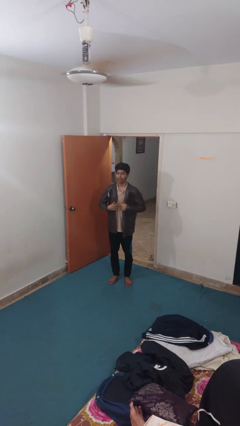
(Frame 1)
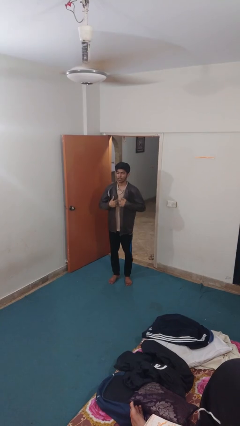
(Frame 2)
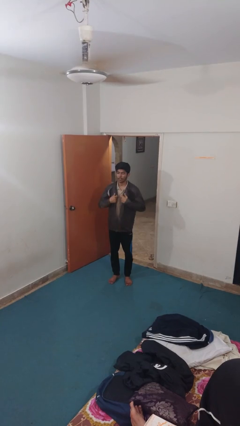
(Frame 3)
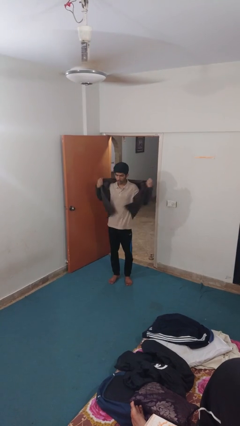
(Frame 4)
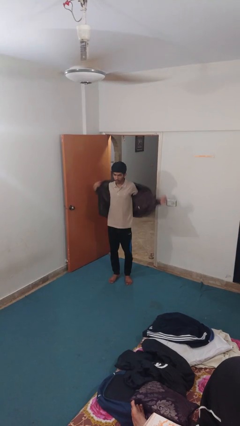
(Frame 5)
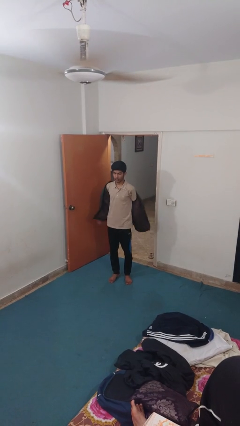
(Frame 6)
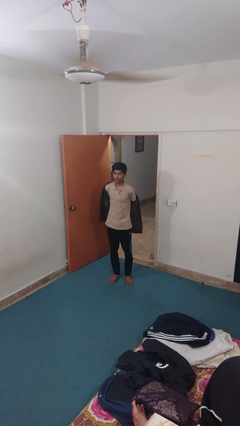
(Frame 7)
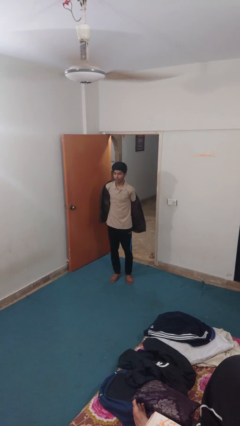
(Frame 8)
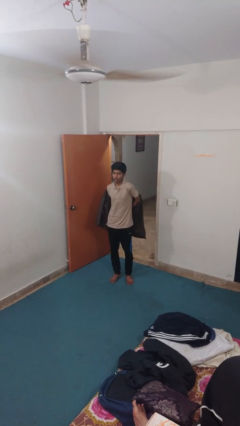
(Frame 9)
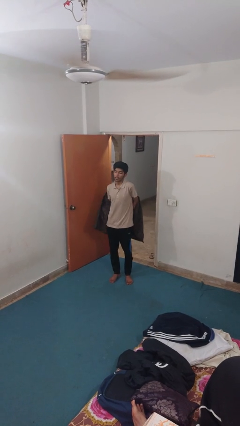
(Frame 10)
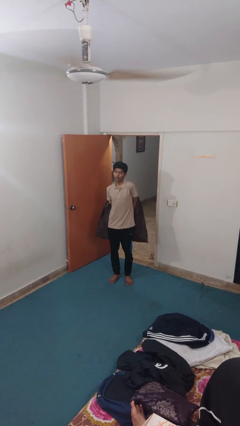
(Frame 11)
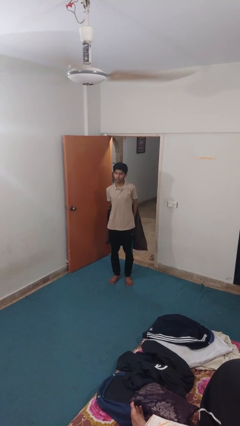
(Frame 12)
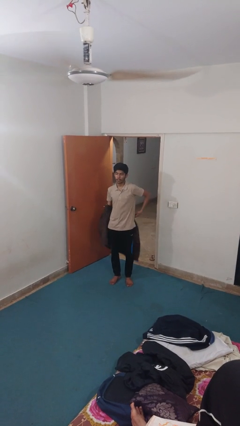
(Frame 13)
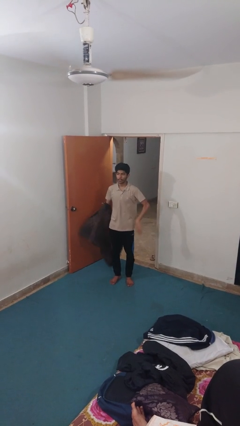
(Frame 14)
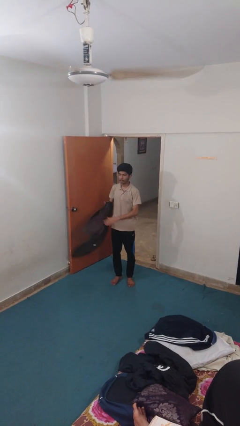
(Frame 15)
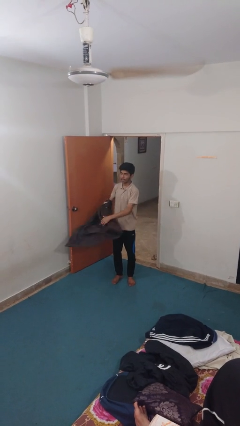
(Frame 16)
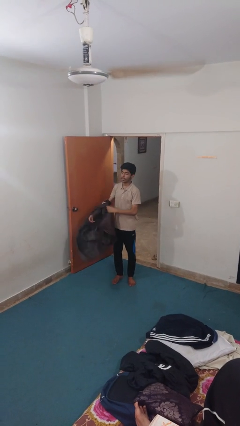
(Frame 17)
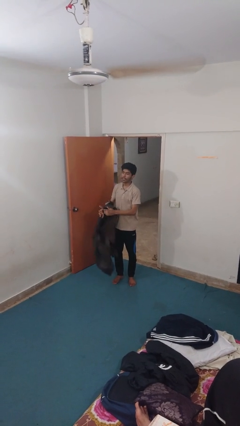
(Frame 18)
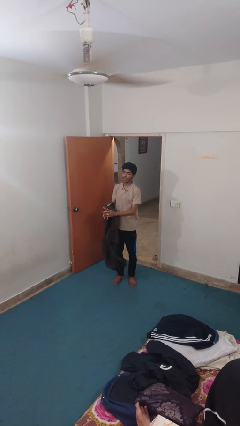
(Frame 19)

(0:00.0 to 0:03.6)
person takes off jacket

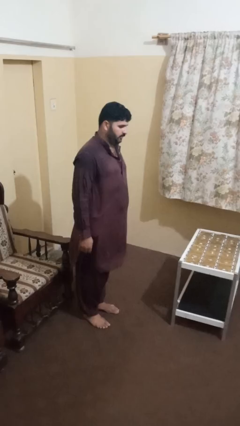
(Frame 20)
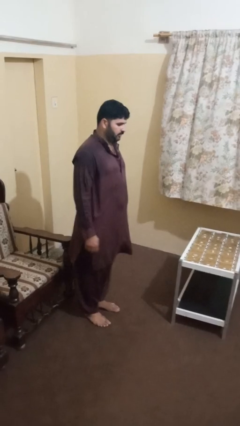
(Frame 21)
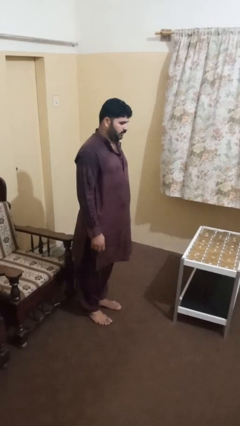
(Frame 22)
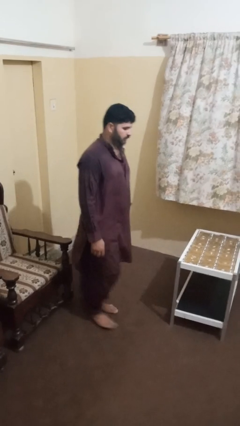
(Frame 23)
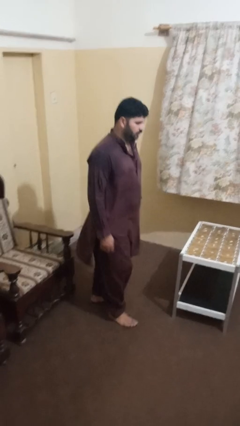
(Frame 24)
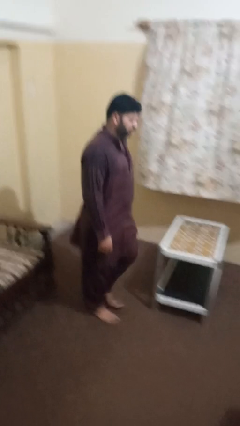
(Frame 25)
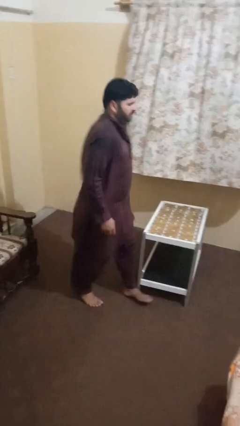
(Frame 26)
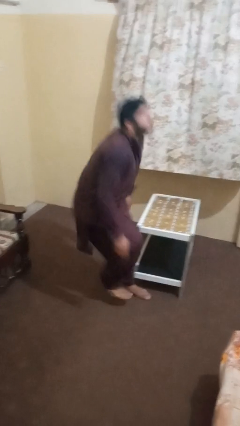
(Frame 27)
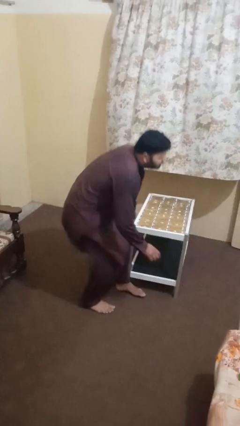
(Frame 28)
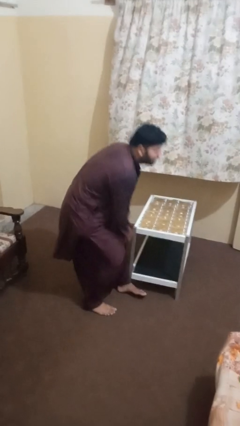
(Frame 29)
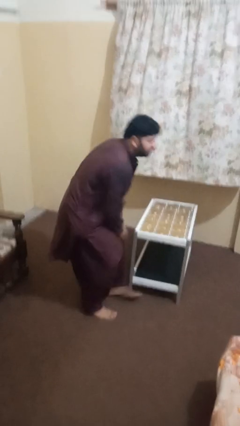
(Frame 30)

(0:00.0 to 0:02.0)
person bumps into table

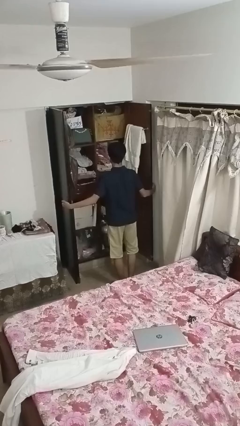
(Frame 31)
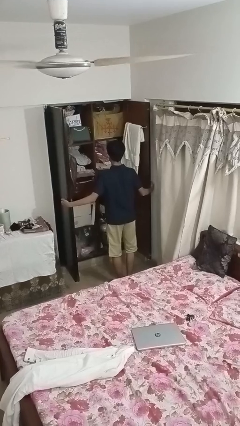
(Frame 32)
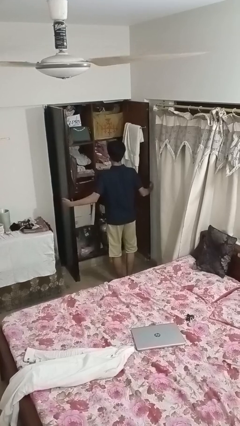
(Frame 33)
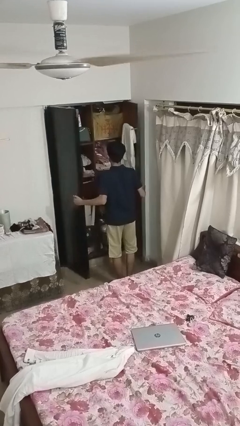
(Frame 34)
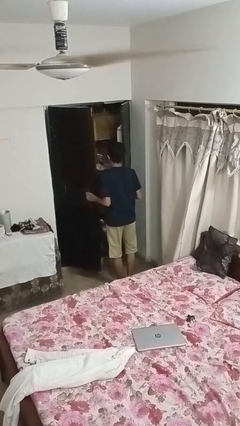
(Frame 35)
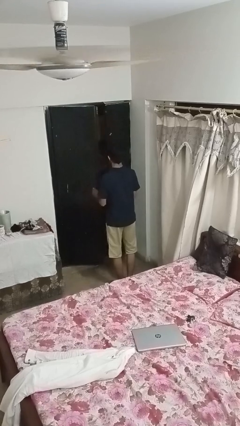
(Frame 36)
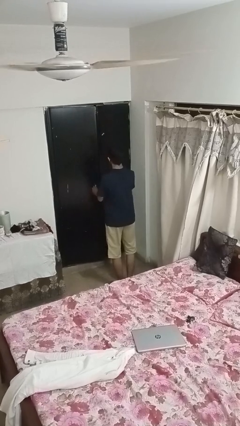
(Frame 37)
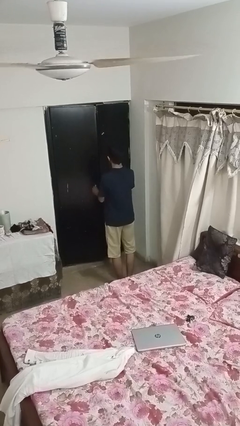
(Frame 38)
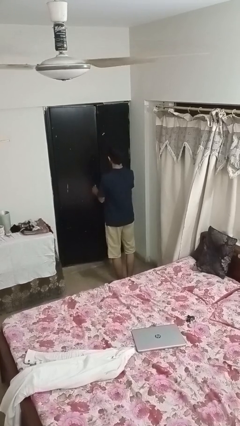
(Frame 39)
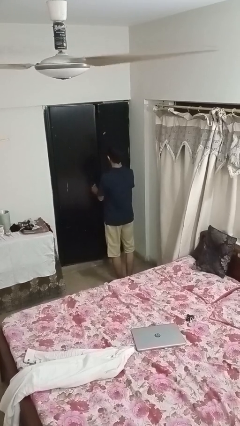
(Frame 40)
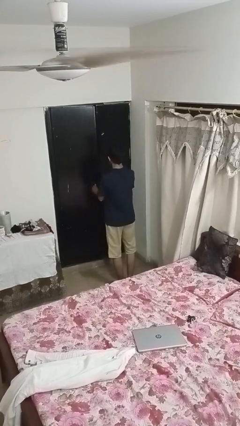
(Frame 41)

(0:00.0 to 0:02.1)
person closes closet door

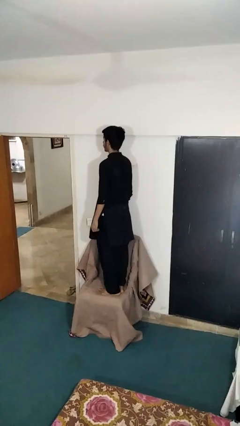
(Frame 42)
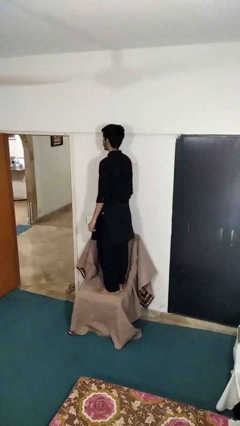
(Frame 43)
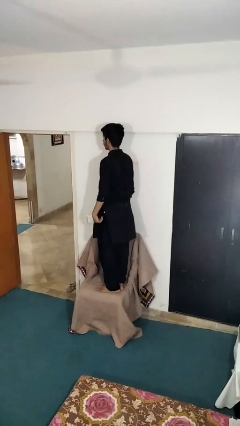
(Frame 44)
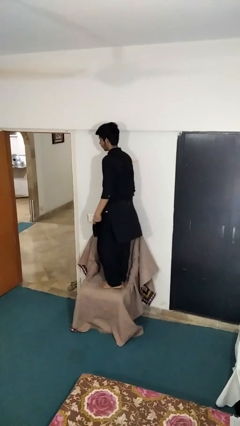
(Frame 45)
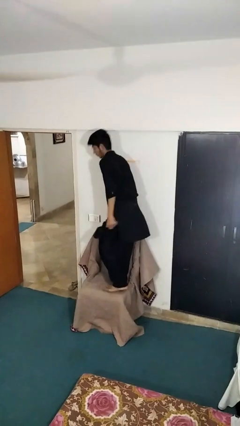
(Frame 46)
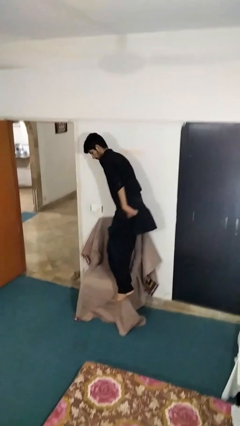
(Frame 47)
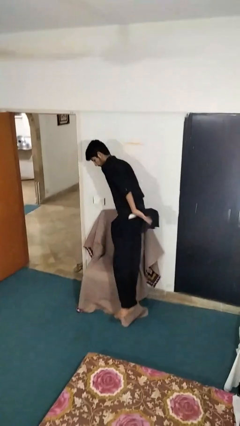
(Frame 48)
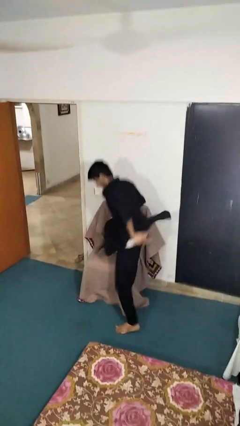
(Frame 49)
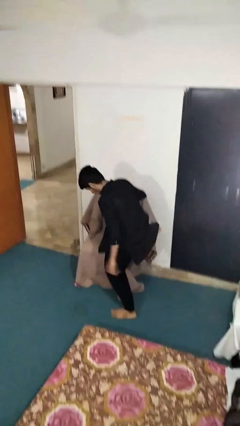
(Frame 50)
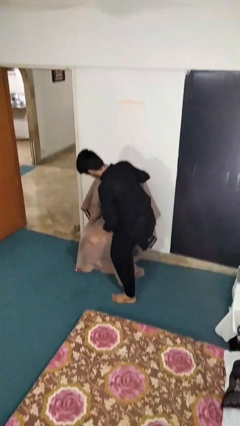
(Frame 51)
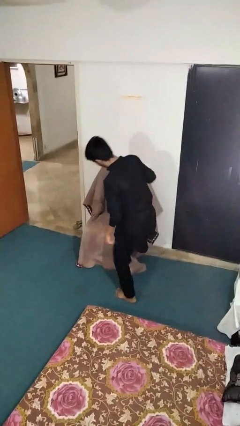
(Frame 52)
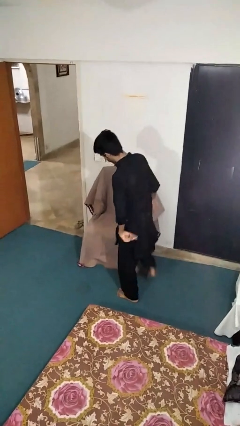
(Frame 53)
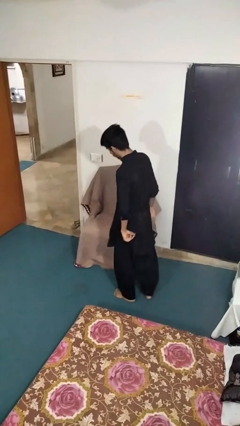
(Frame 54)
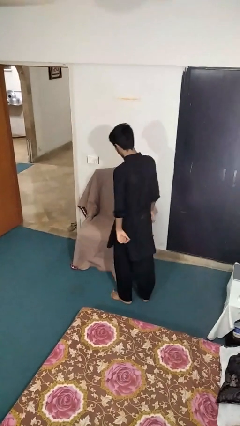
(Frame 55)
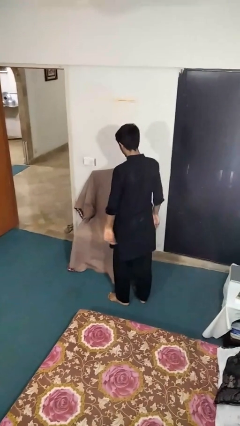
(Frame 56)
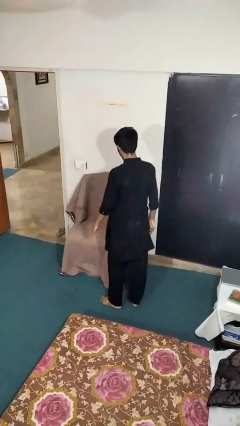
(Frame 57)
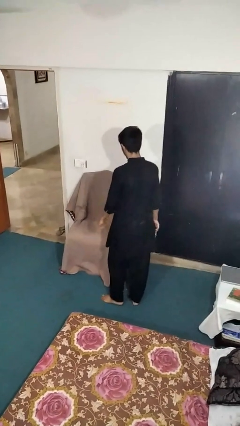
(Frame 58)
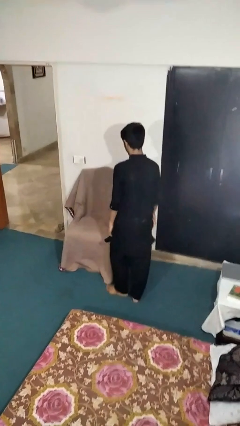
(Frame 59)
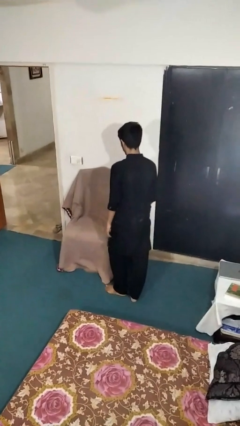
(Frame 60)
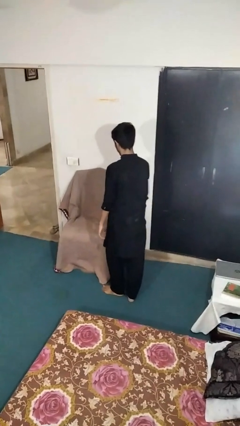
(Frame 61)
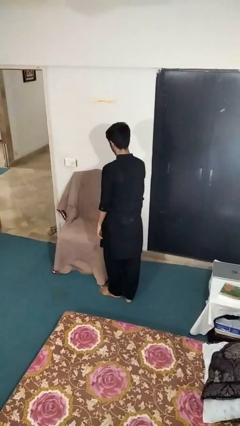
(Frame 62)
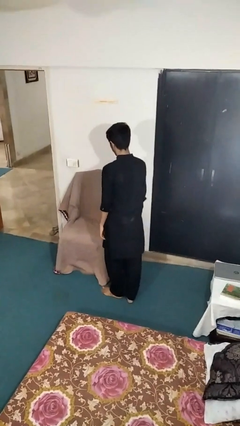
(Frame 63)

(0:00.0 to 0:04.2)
person climbs off couch

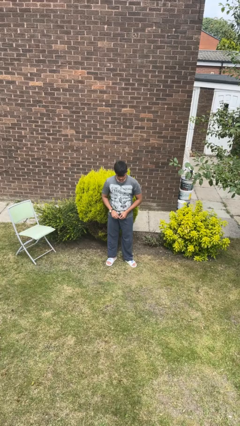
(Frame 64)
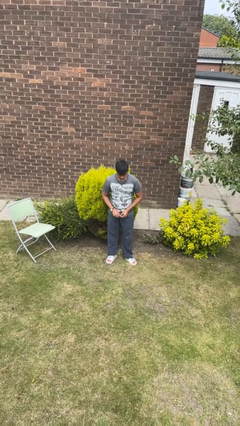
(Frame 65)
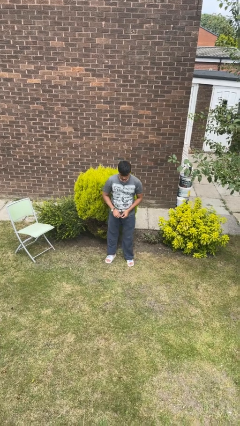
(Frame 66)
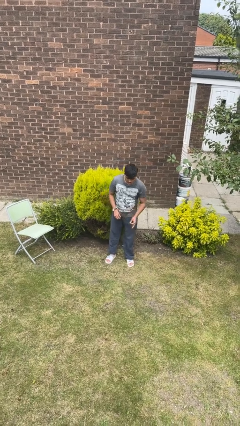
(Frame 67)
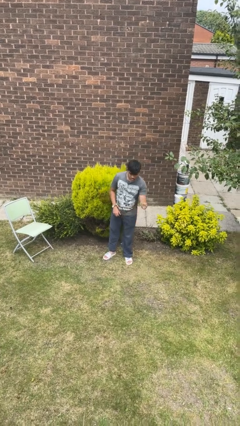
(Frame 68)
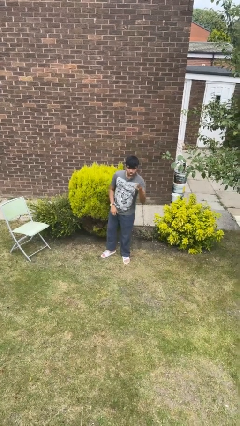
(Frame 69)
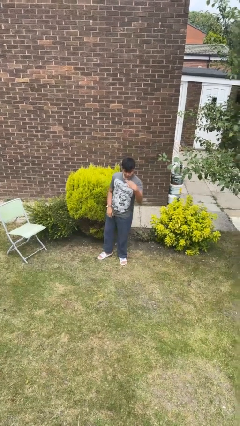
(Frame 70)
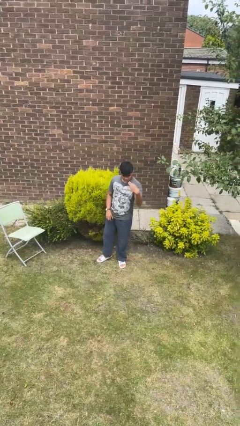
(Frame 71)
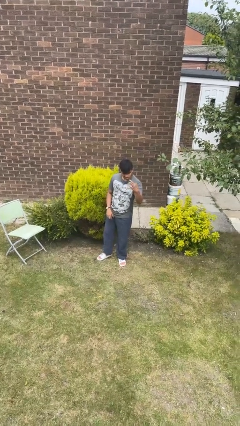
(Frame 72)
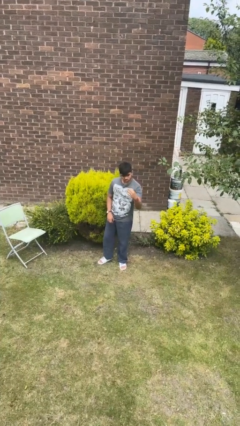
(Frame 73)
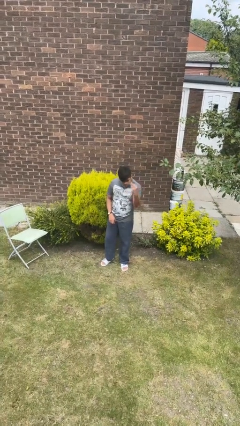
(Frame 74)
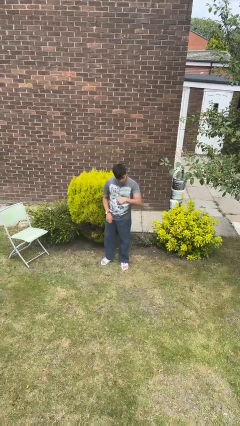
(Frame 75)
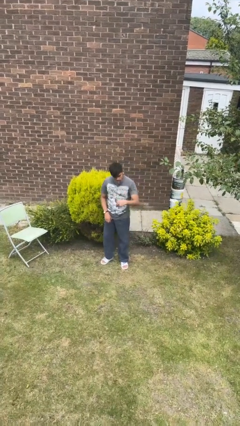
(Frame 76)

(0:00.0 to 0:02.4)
person gestures come here

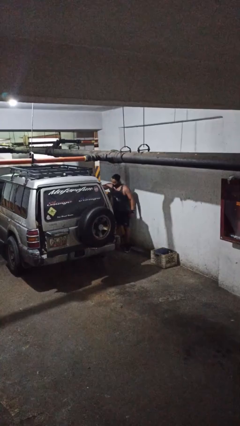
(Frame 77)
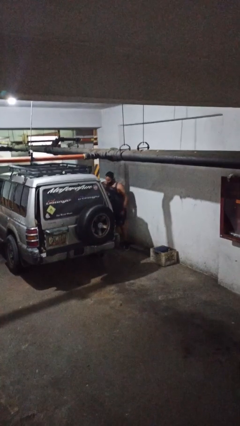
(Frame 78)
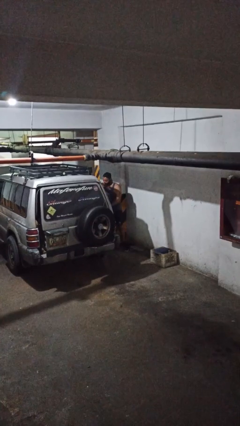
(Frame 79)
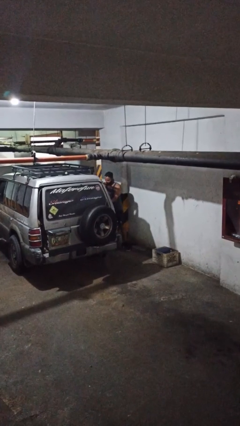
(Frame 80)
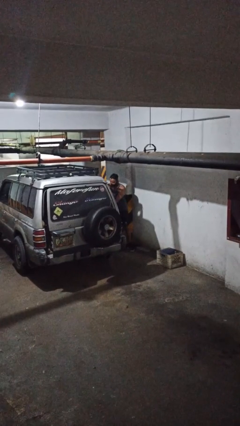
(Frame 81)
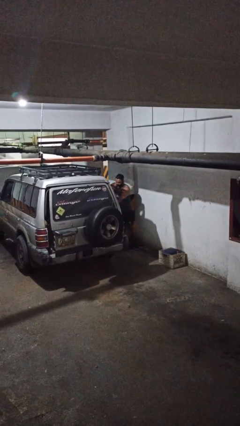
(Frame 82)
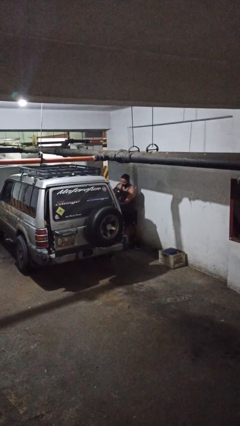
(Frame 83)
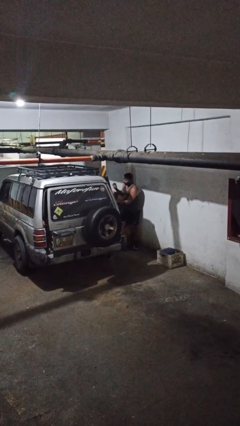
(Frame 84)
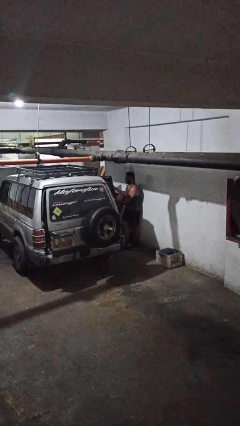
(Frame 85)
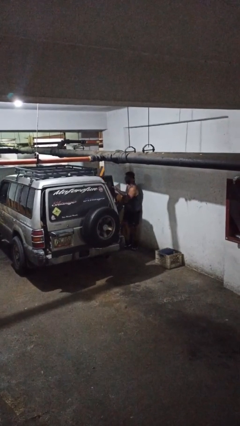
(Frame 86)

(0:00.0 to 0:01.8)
person opens car door

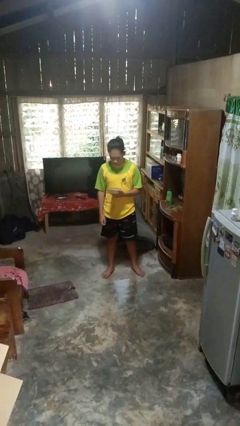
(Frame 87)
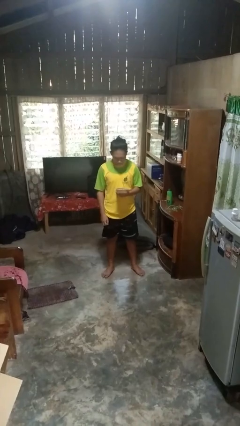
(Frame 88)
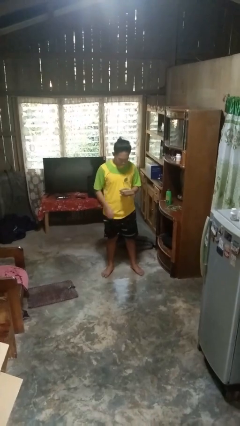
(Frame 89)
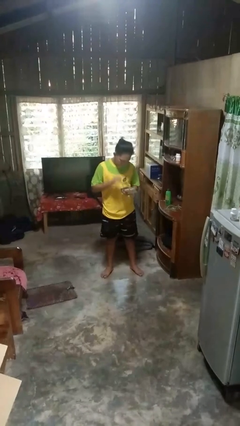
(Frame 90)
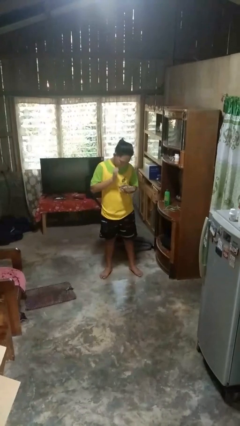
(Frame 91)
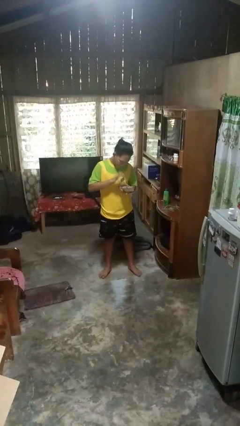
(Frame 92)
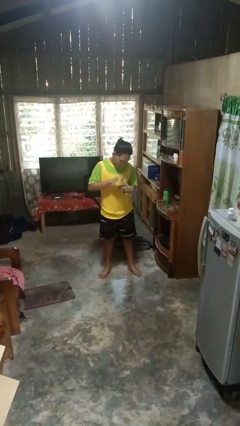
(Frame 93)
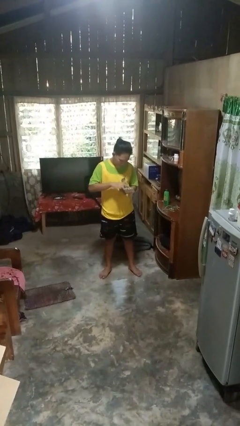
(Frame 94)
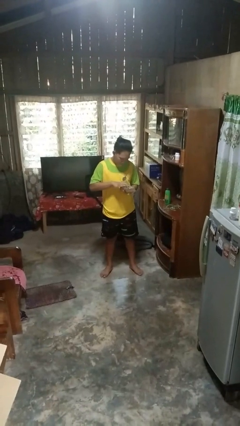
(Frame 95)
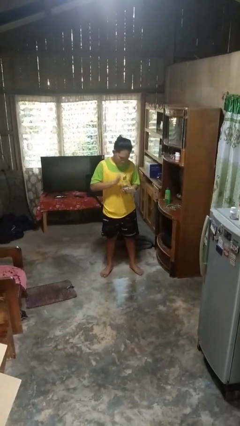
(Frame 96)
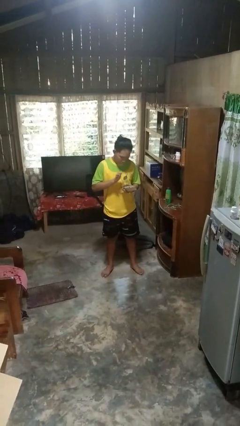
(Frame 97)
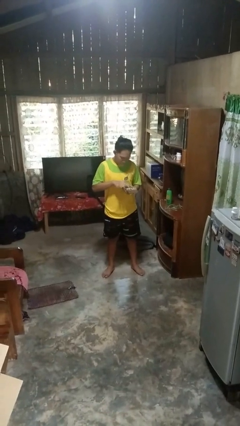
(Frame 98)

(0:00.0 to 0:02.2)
person taps object with finger
